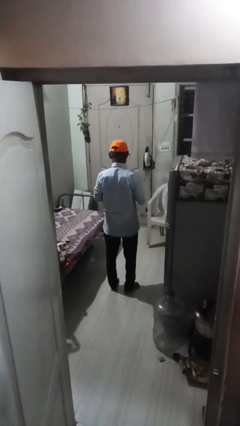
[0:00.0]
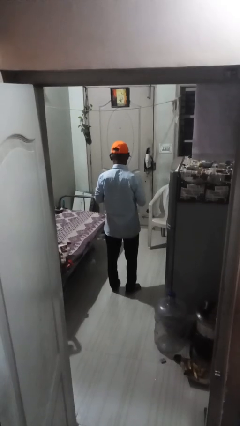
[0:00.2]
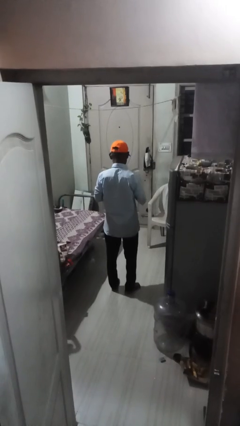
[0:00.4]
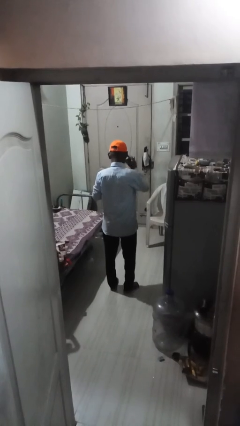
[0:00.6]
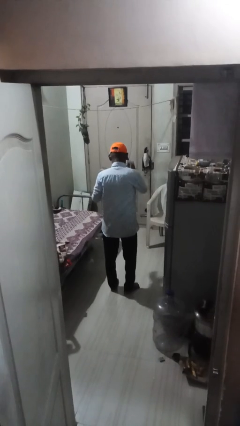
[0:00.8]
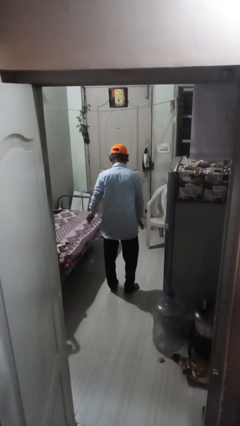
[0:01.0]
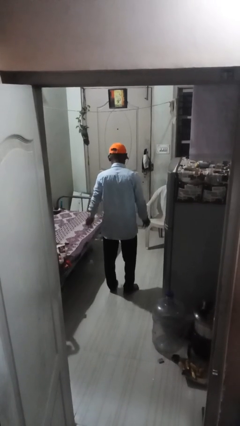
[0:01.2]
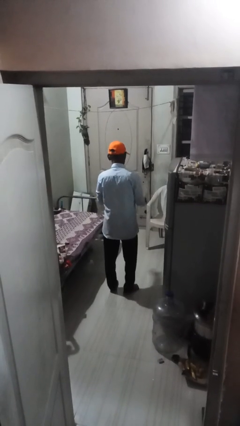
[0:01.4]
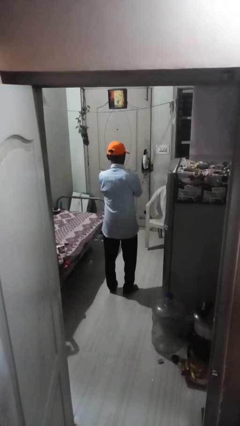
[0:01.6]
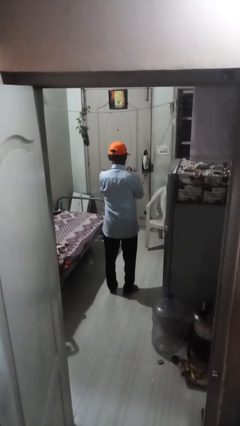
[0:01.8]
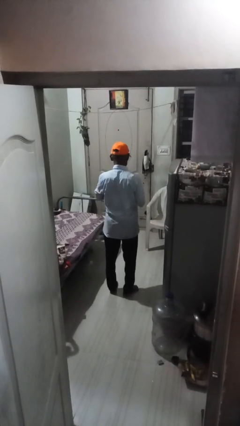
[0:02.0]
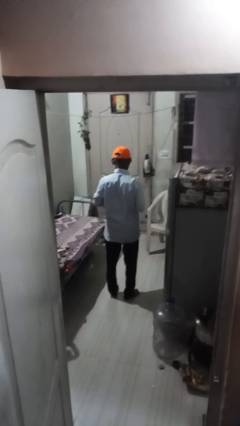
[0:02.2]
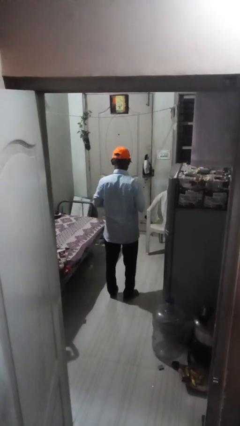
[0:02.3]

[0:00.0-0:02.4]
person bounces ball on floor

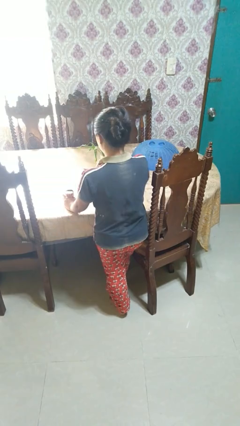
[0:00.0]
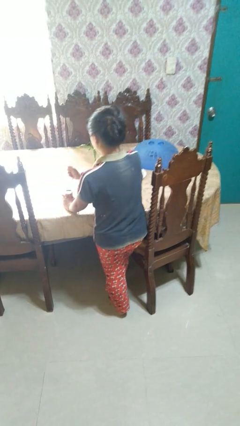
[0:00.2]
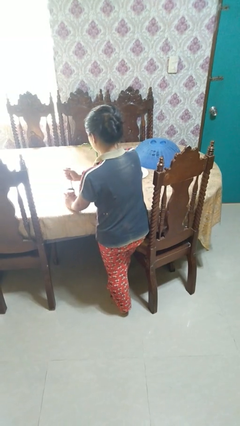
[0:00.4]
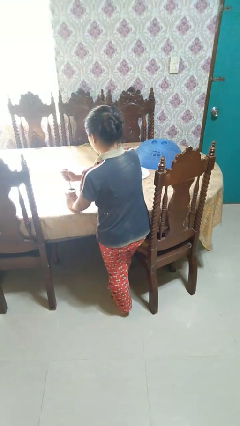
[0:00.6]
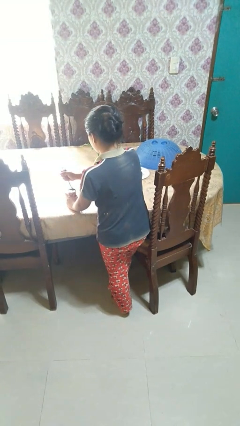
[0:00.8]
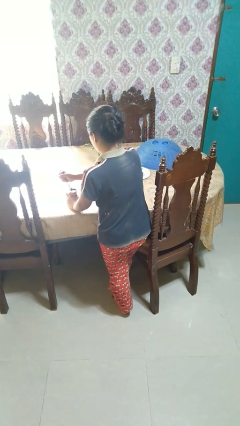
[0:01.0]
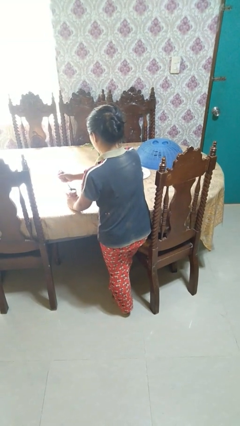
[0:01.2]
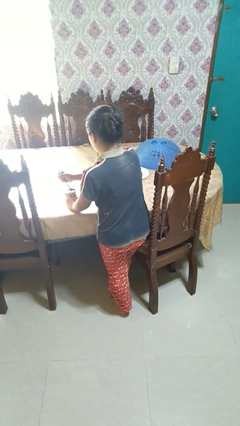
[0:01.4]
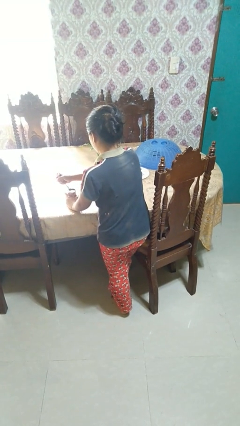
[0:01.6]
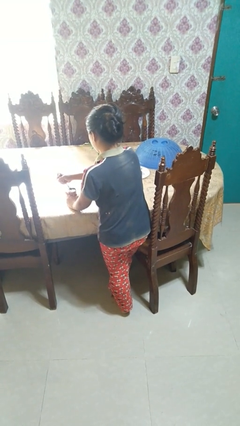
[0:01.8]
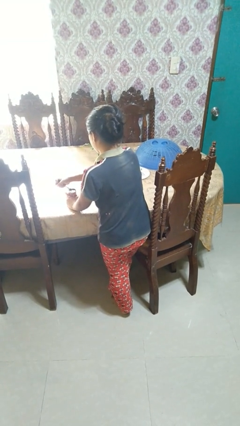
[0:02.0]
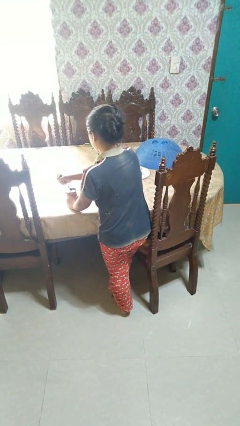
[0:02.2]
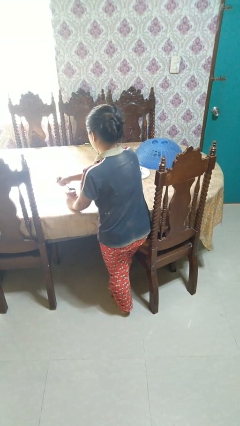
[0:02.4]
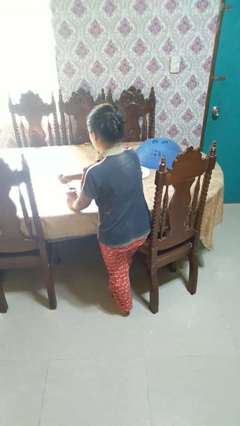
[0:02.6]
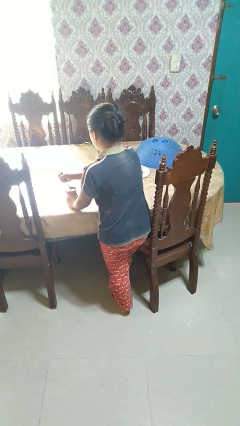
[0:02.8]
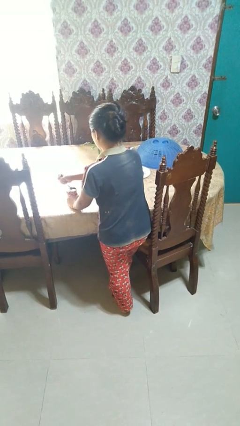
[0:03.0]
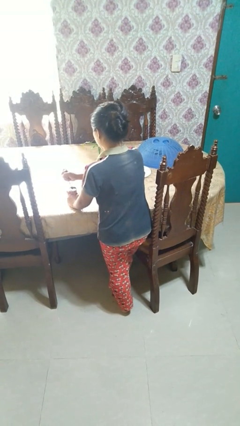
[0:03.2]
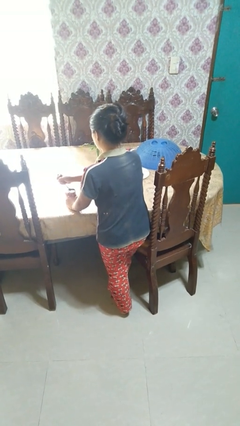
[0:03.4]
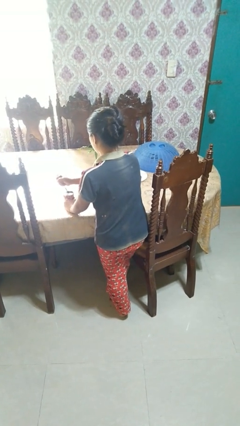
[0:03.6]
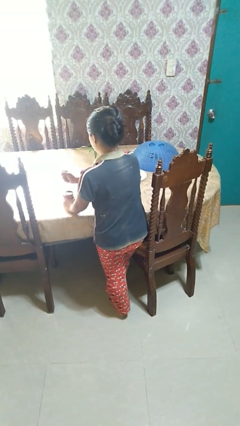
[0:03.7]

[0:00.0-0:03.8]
person opens can with can opener

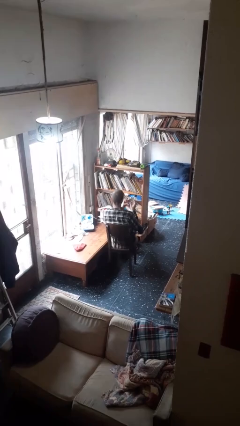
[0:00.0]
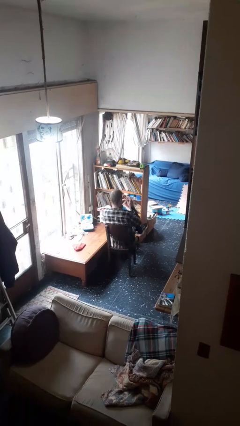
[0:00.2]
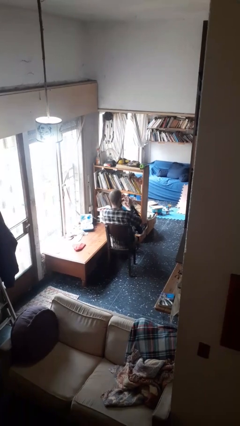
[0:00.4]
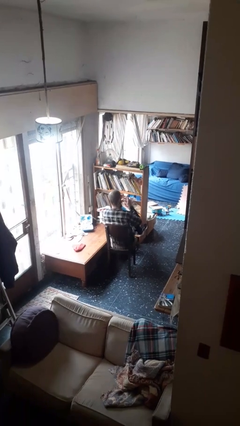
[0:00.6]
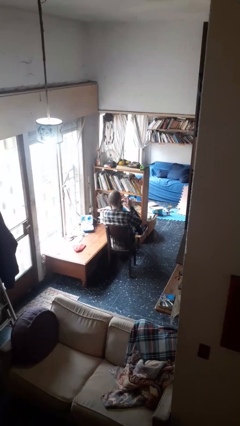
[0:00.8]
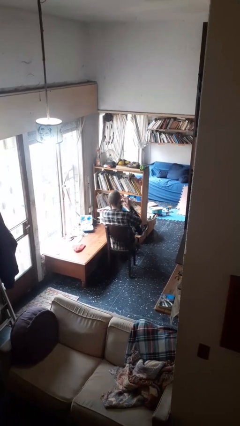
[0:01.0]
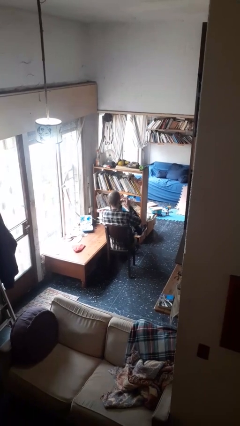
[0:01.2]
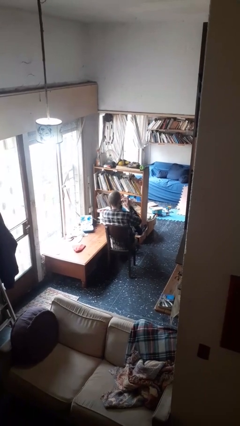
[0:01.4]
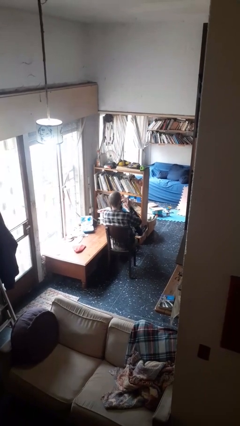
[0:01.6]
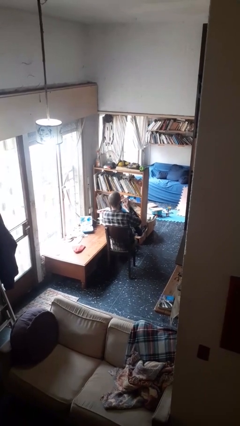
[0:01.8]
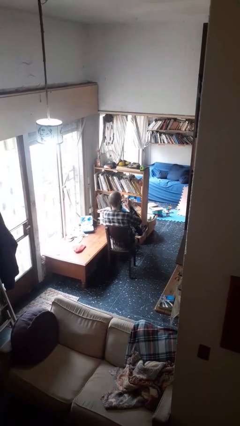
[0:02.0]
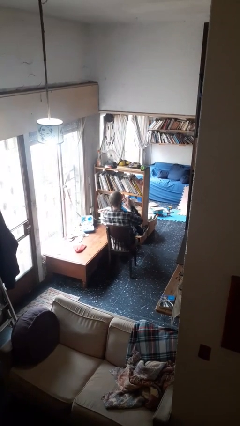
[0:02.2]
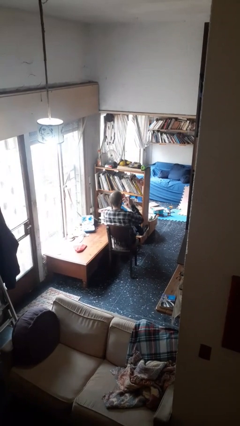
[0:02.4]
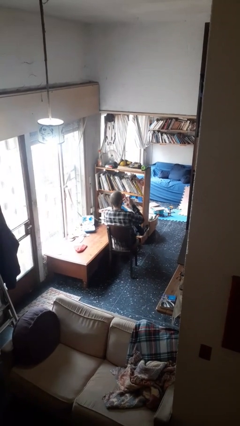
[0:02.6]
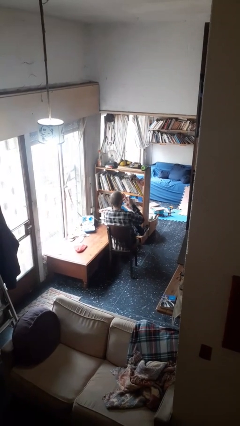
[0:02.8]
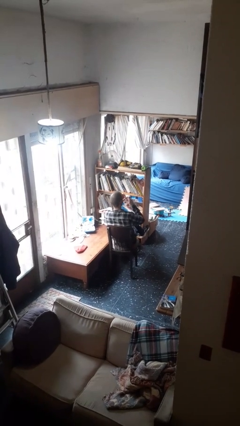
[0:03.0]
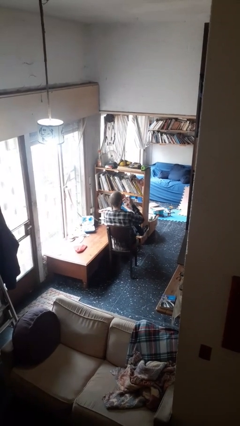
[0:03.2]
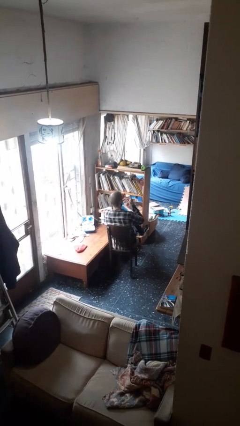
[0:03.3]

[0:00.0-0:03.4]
person clips fingernails

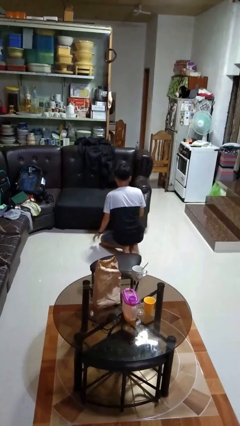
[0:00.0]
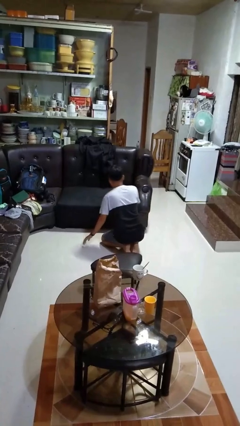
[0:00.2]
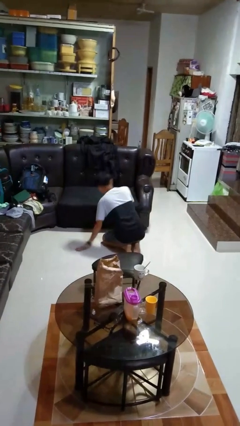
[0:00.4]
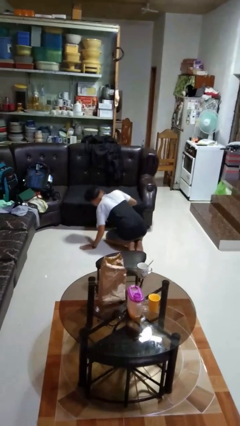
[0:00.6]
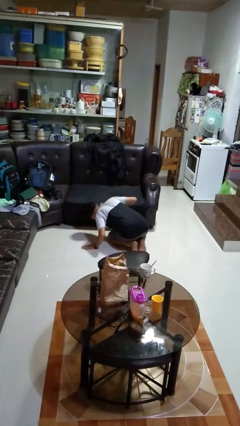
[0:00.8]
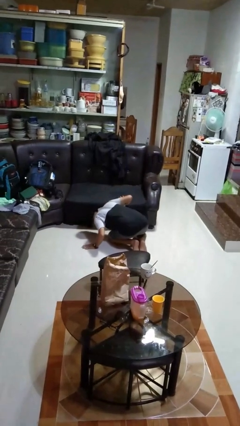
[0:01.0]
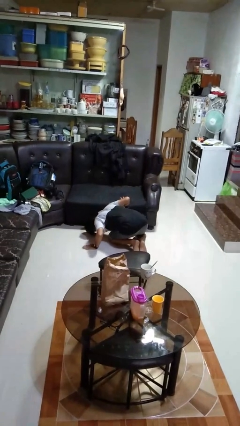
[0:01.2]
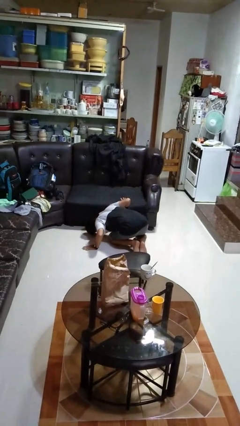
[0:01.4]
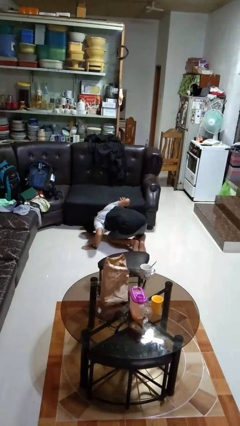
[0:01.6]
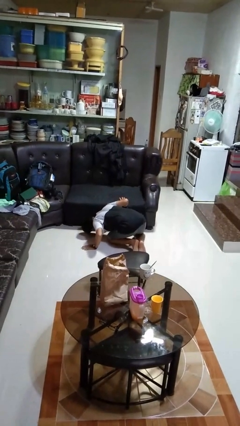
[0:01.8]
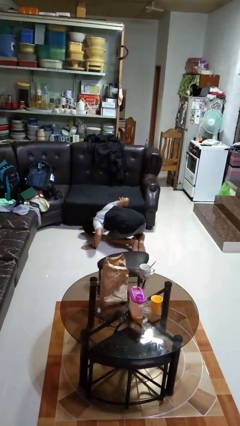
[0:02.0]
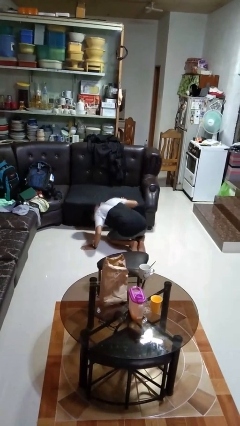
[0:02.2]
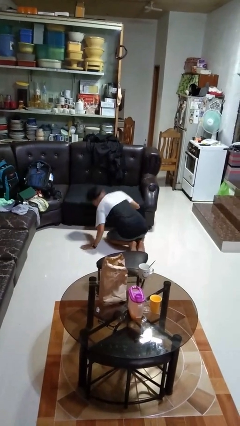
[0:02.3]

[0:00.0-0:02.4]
person searches under couch

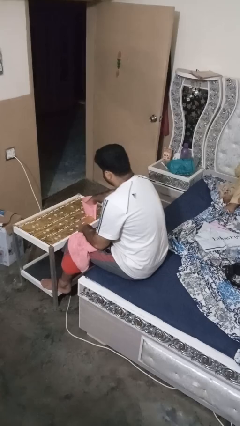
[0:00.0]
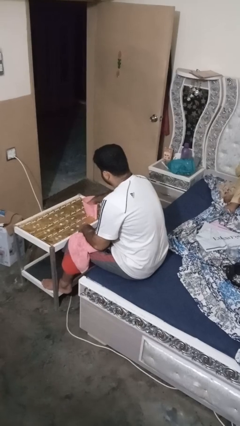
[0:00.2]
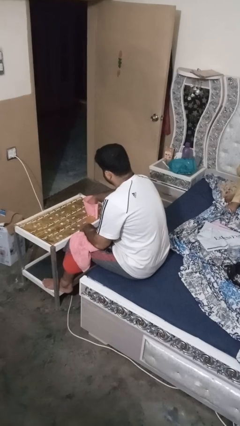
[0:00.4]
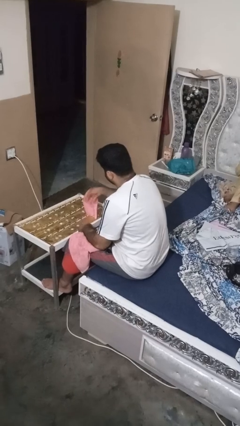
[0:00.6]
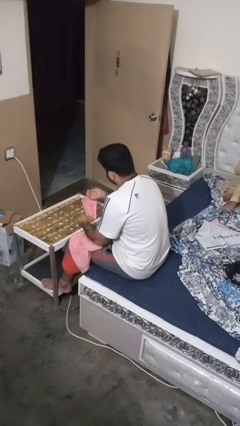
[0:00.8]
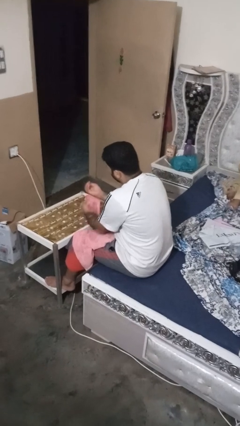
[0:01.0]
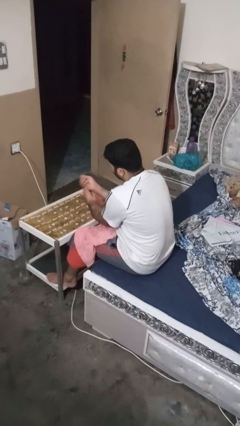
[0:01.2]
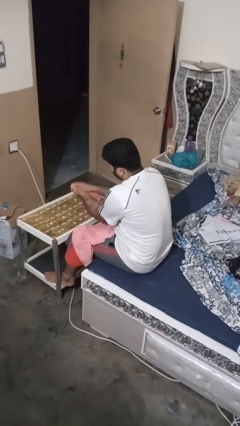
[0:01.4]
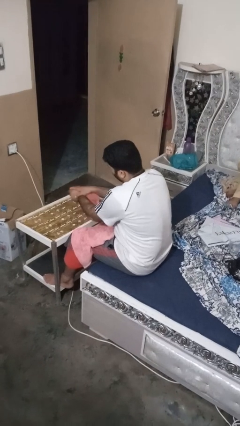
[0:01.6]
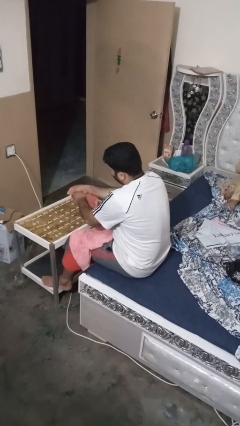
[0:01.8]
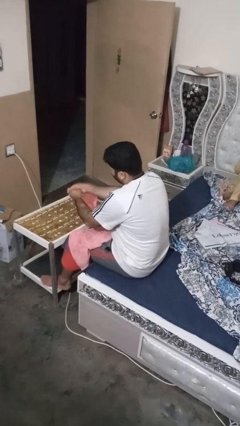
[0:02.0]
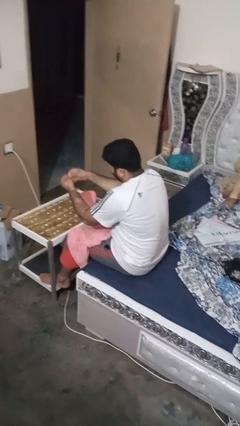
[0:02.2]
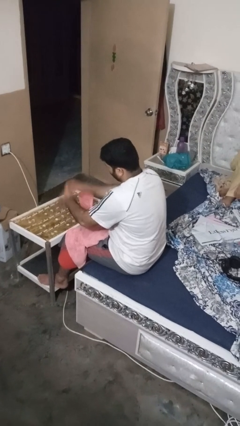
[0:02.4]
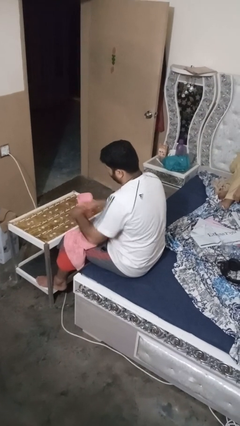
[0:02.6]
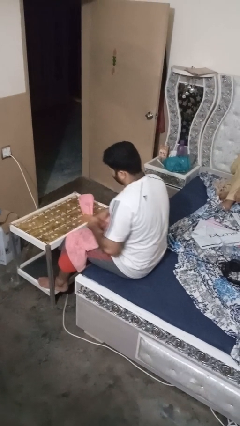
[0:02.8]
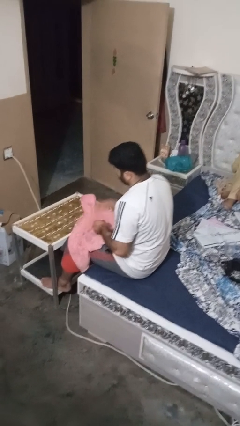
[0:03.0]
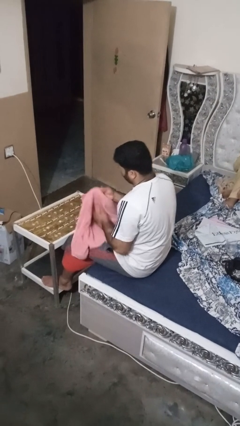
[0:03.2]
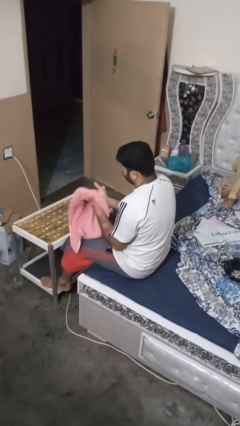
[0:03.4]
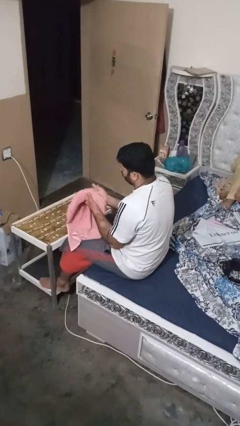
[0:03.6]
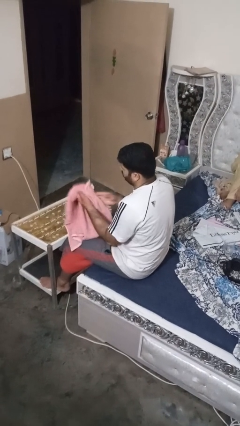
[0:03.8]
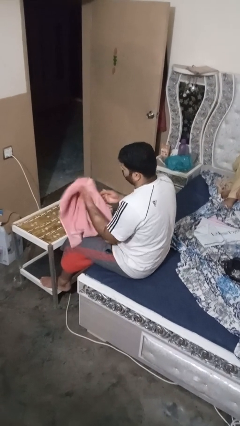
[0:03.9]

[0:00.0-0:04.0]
person washes hands

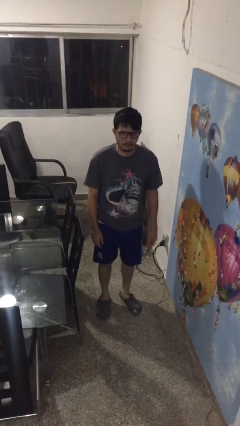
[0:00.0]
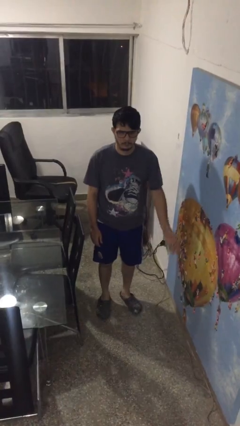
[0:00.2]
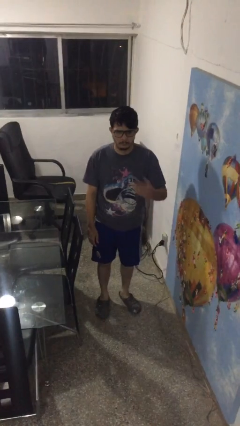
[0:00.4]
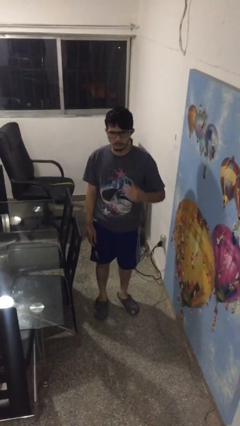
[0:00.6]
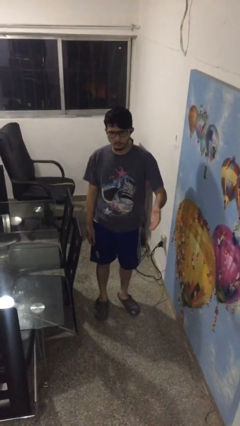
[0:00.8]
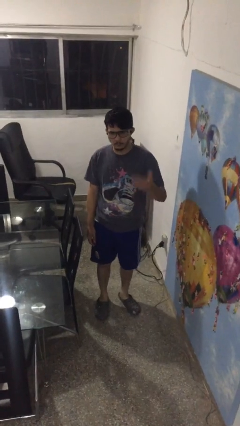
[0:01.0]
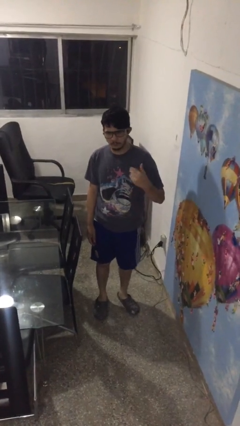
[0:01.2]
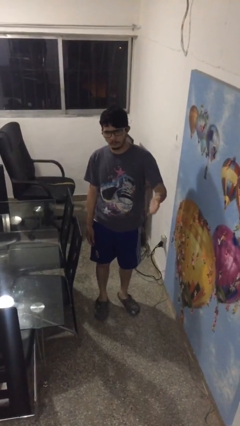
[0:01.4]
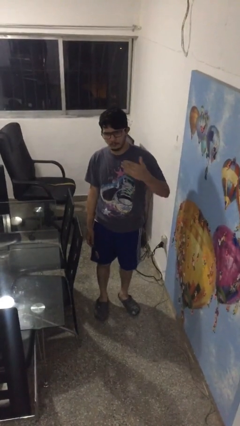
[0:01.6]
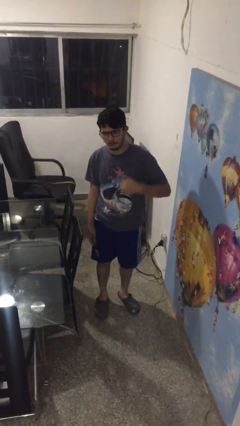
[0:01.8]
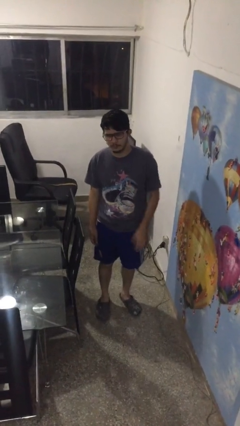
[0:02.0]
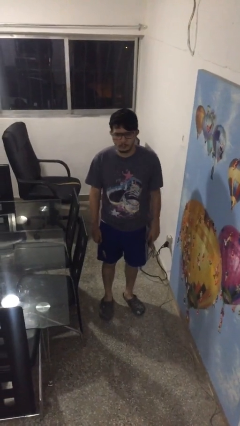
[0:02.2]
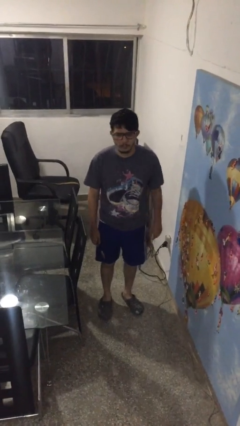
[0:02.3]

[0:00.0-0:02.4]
person gestures come here
